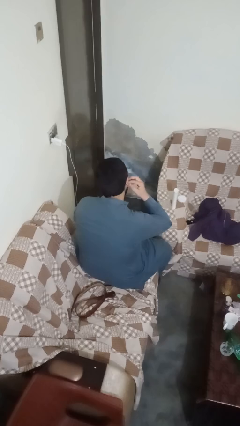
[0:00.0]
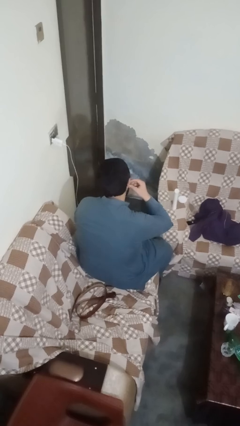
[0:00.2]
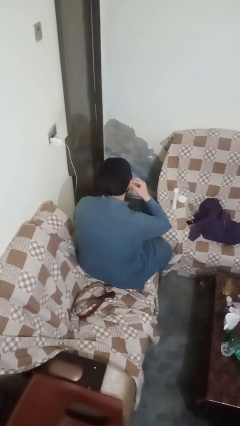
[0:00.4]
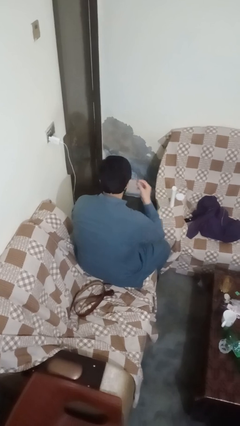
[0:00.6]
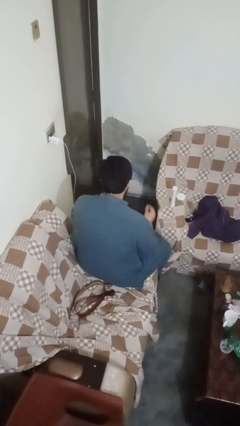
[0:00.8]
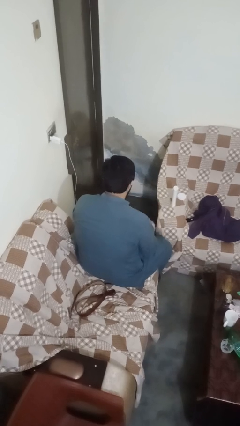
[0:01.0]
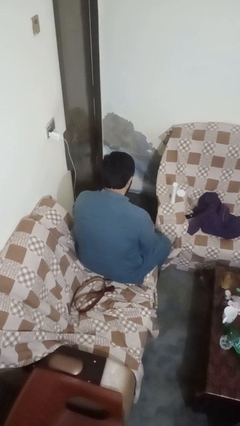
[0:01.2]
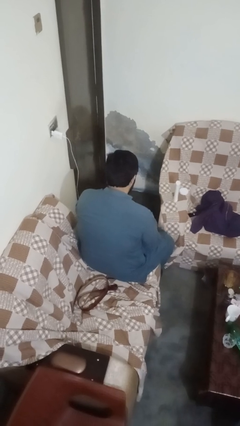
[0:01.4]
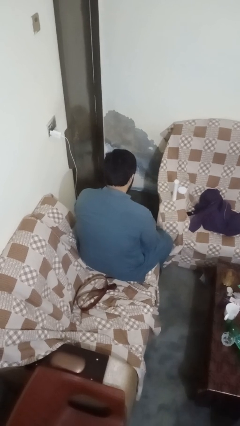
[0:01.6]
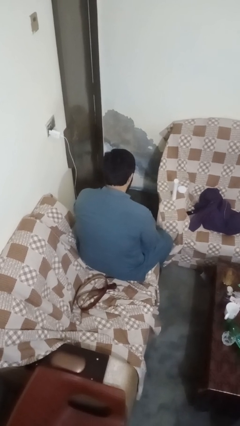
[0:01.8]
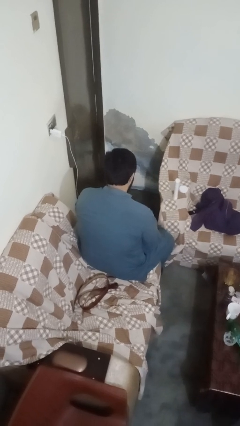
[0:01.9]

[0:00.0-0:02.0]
person takes off earrings

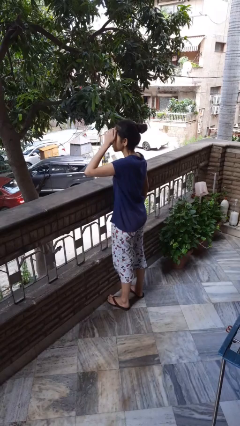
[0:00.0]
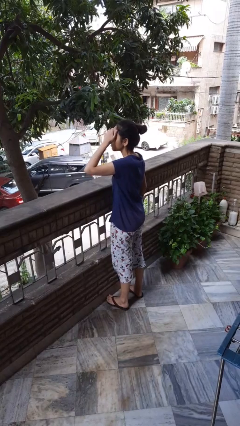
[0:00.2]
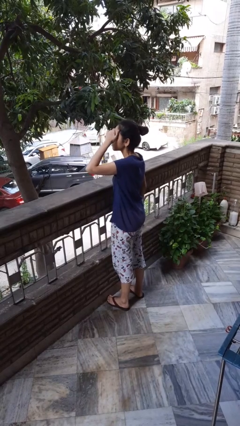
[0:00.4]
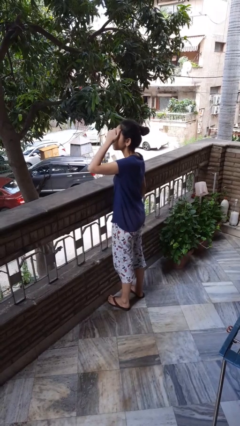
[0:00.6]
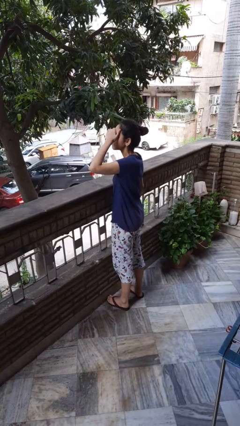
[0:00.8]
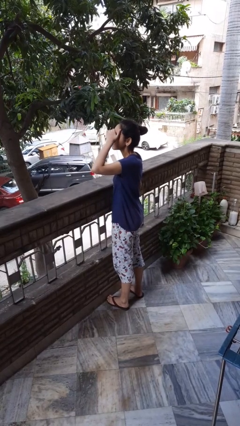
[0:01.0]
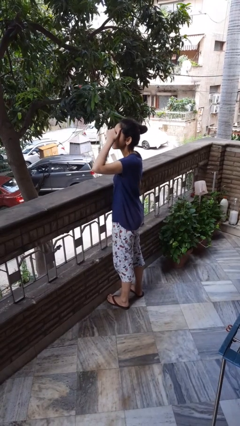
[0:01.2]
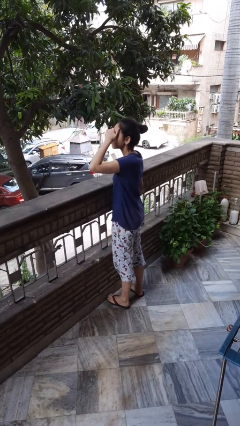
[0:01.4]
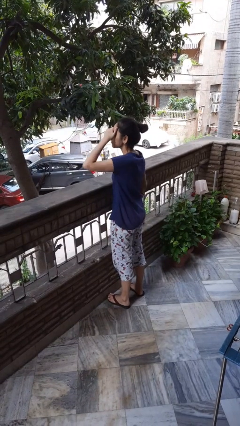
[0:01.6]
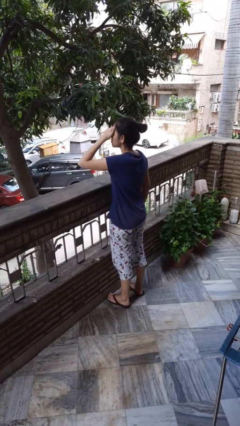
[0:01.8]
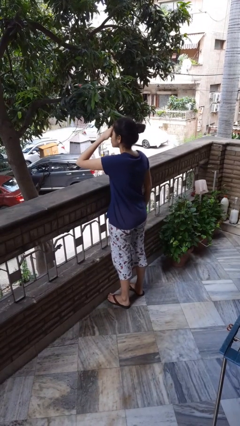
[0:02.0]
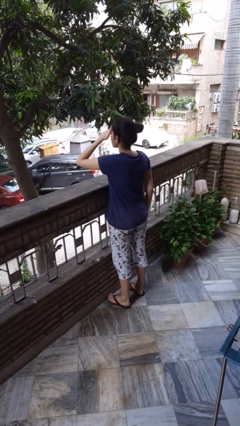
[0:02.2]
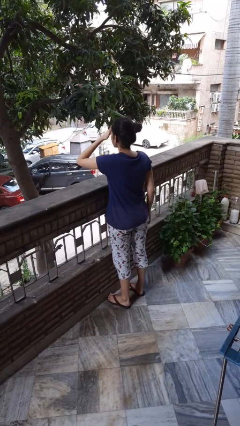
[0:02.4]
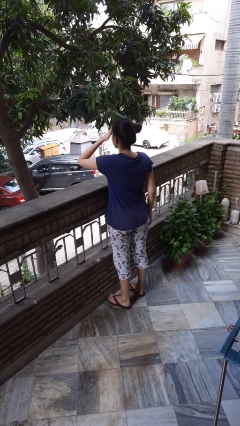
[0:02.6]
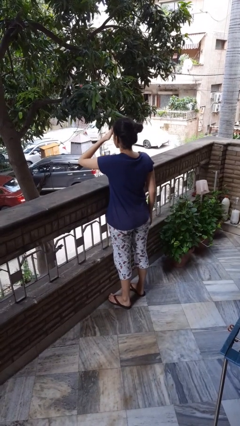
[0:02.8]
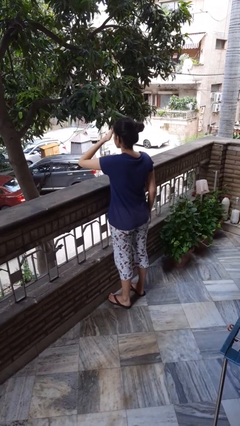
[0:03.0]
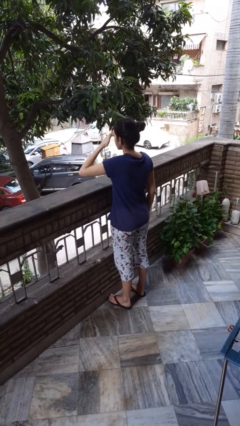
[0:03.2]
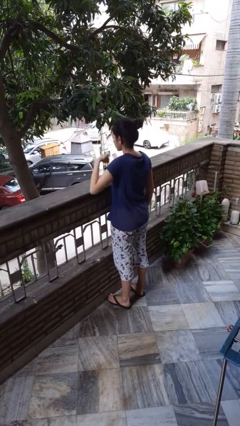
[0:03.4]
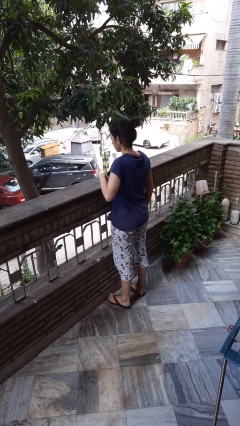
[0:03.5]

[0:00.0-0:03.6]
person shades eyes

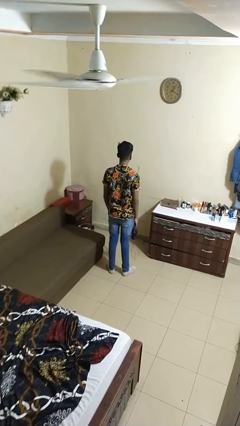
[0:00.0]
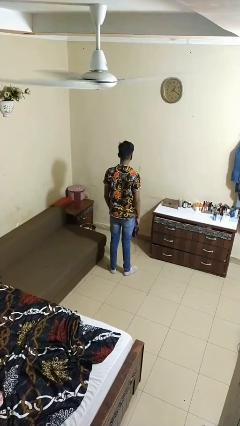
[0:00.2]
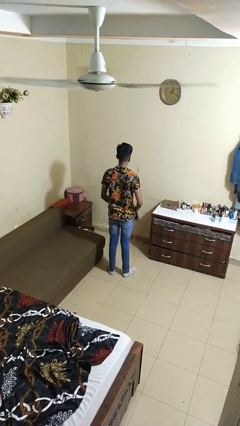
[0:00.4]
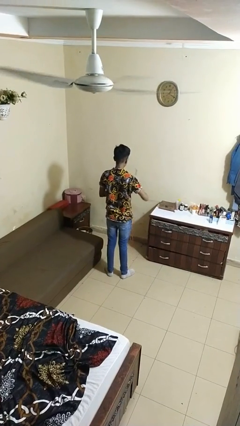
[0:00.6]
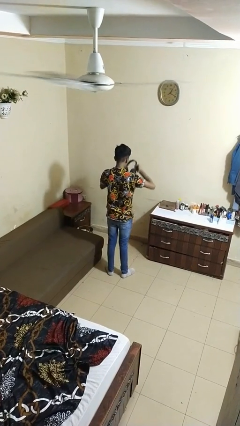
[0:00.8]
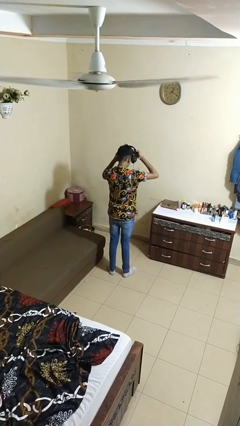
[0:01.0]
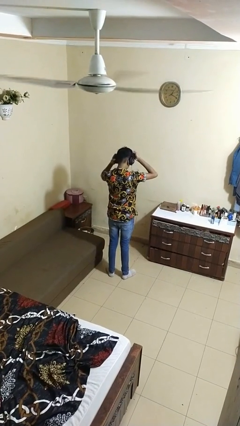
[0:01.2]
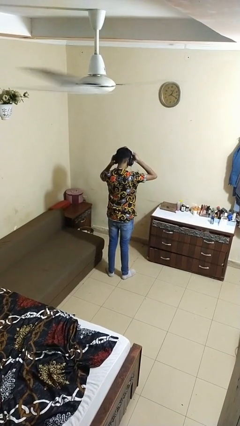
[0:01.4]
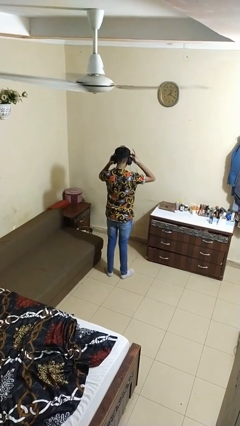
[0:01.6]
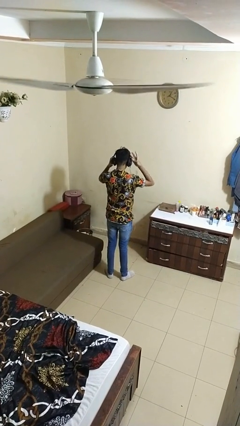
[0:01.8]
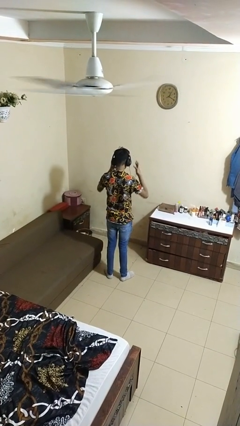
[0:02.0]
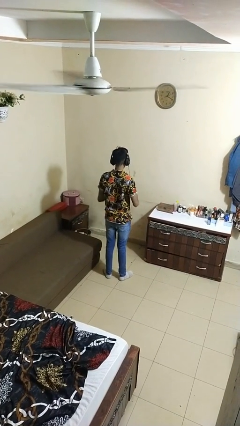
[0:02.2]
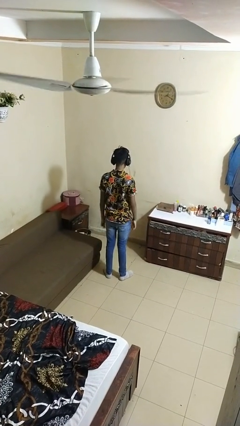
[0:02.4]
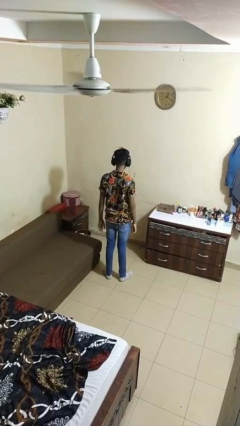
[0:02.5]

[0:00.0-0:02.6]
person puts on headphones

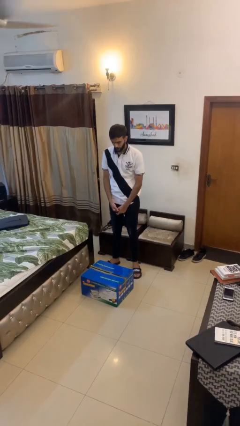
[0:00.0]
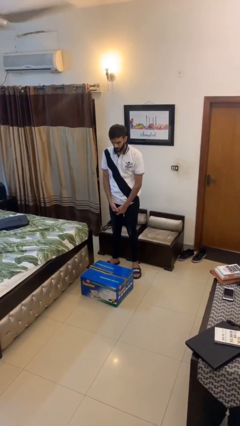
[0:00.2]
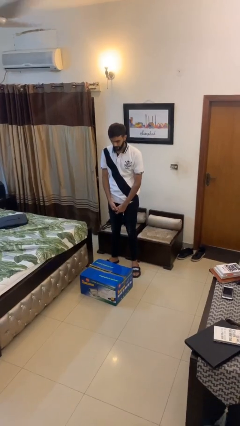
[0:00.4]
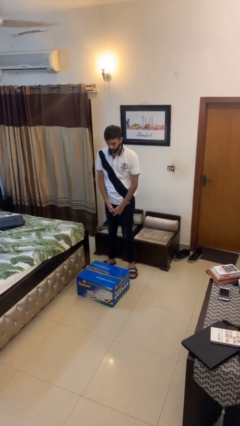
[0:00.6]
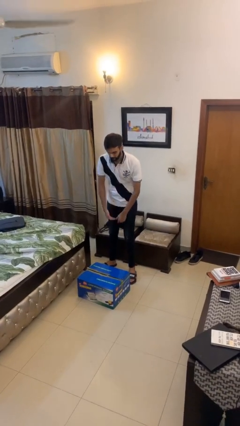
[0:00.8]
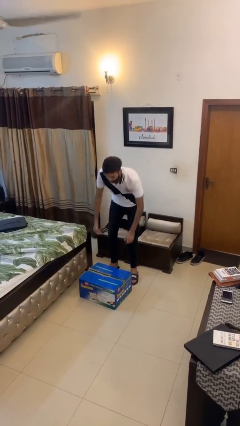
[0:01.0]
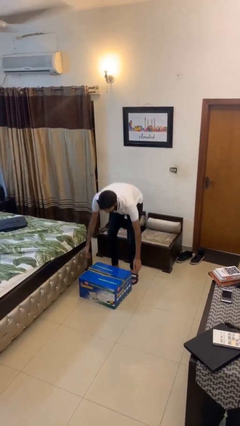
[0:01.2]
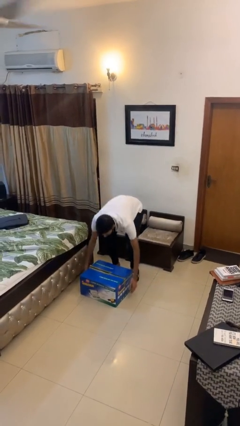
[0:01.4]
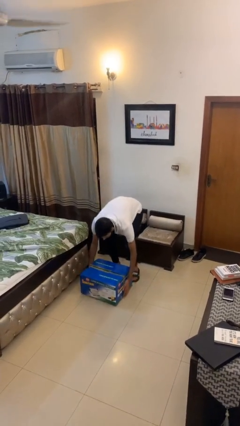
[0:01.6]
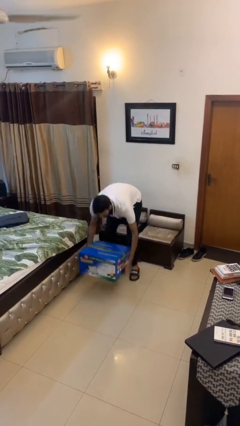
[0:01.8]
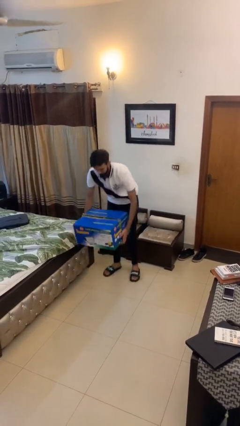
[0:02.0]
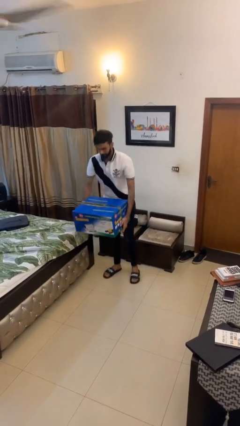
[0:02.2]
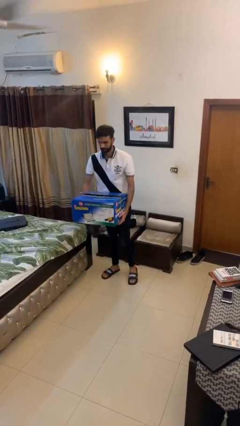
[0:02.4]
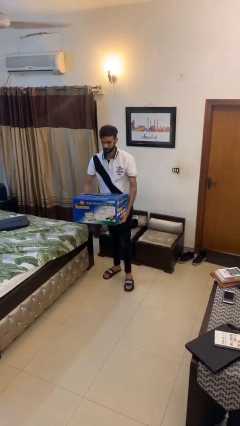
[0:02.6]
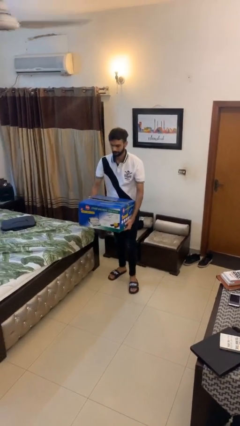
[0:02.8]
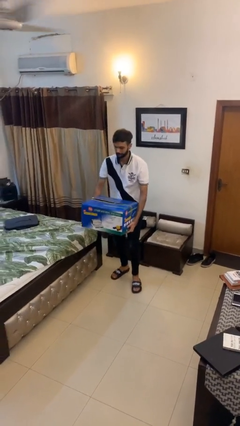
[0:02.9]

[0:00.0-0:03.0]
person picks up object from floor

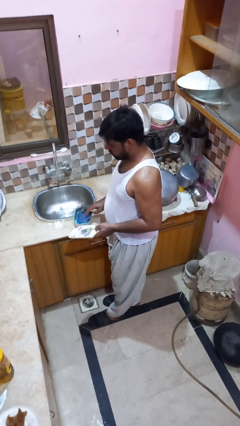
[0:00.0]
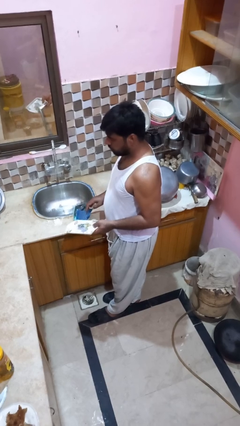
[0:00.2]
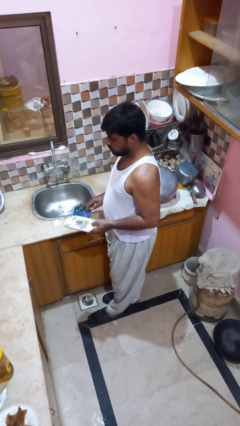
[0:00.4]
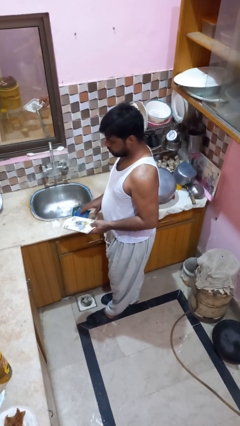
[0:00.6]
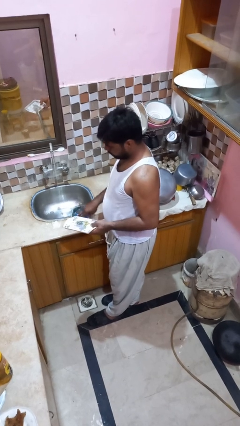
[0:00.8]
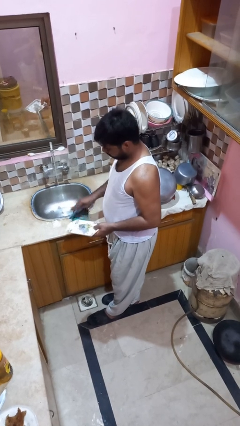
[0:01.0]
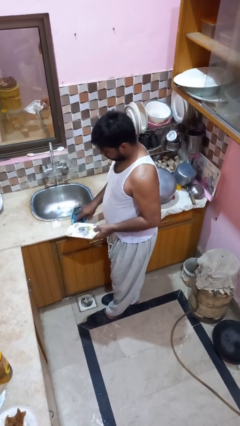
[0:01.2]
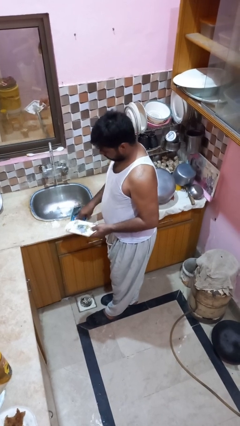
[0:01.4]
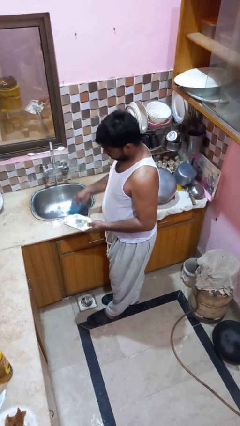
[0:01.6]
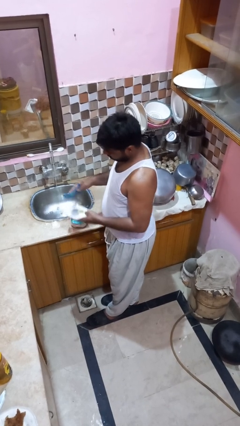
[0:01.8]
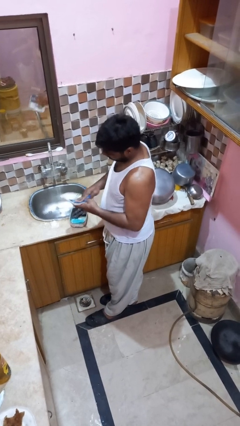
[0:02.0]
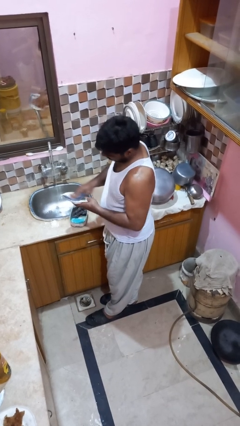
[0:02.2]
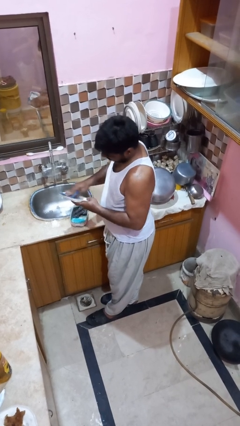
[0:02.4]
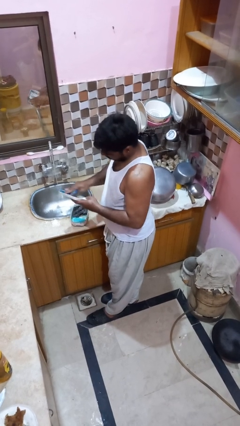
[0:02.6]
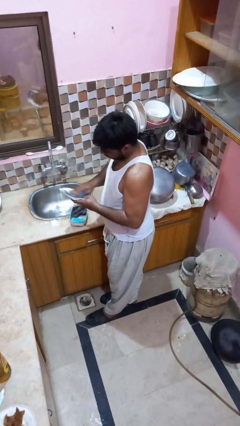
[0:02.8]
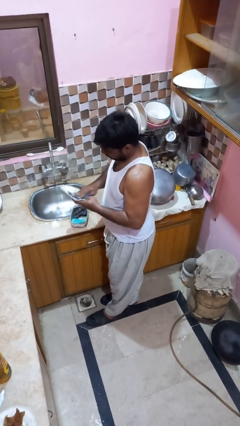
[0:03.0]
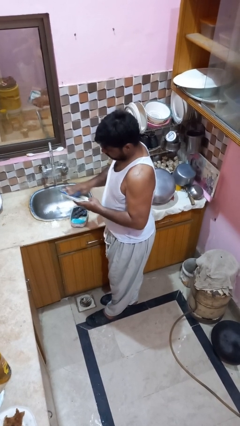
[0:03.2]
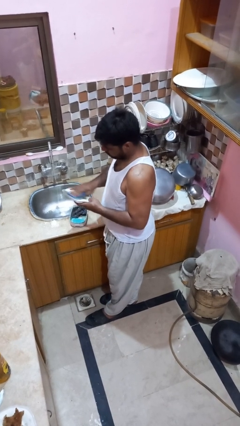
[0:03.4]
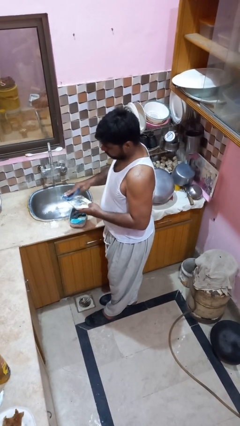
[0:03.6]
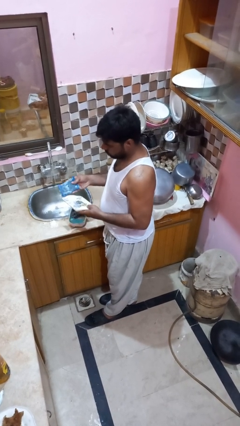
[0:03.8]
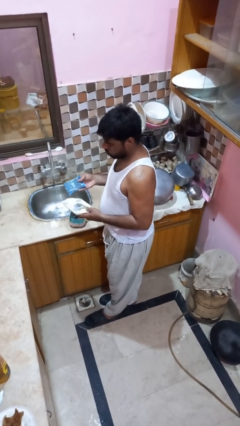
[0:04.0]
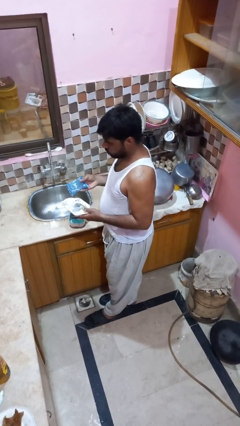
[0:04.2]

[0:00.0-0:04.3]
person washes dish

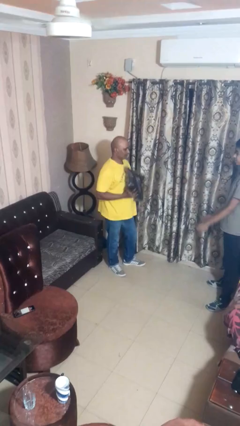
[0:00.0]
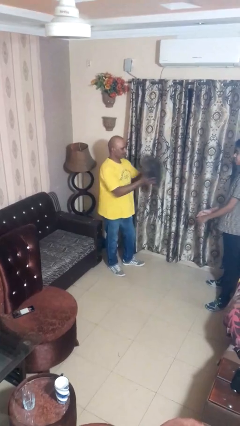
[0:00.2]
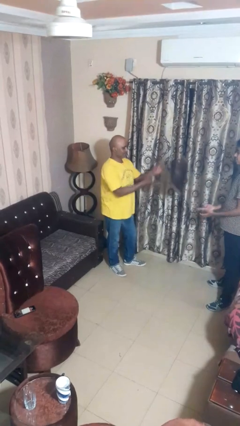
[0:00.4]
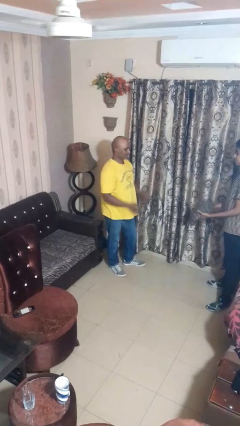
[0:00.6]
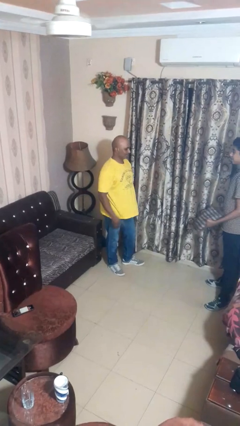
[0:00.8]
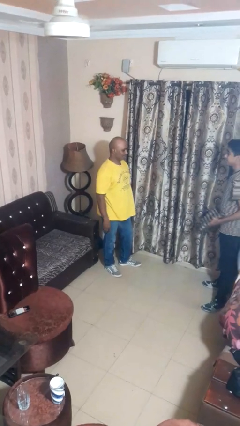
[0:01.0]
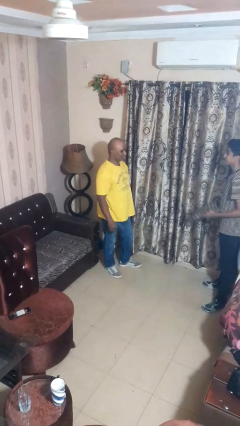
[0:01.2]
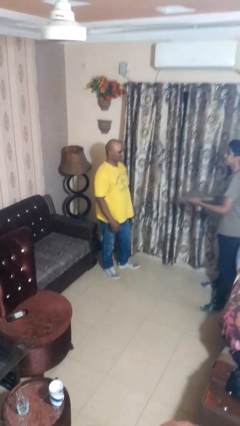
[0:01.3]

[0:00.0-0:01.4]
person throws object to person

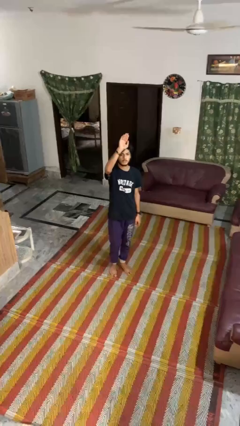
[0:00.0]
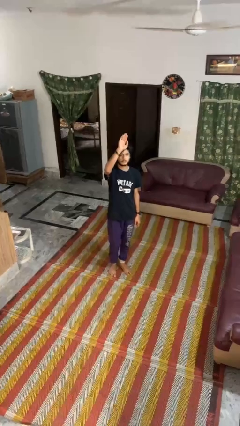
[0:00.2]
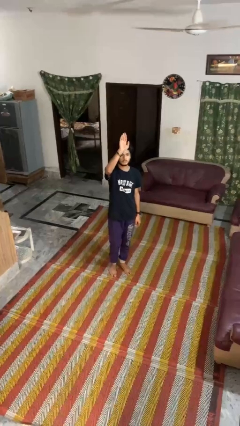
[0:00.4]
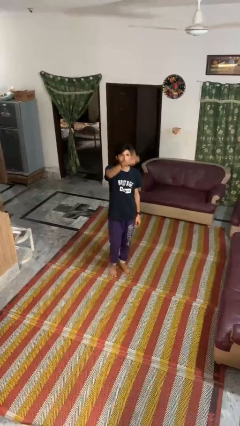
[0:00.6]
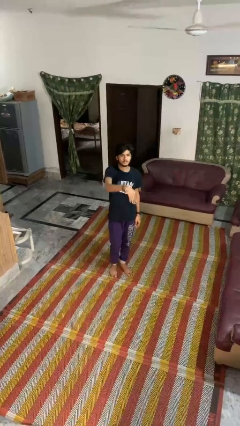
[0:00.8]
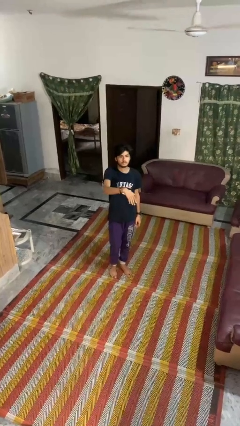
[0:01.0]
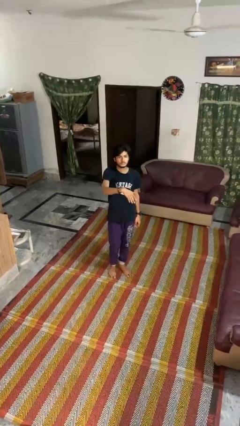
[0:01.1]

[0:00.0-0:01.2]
person gestures swipe down
